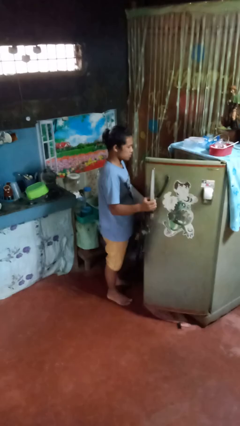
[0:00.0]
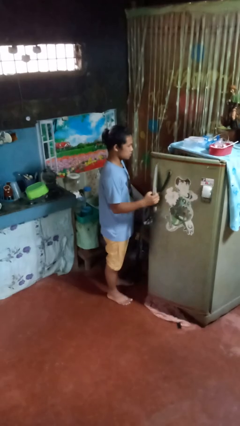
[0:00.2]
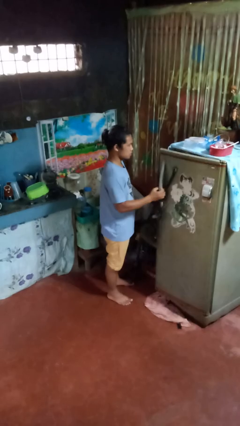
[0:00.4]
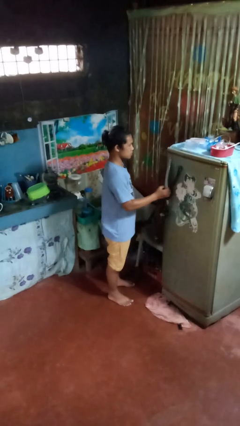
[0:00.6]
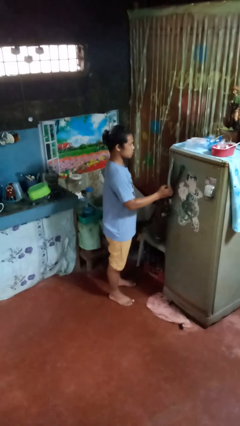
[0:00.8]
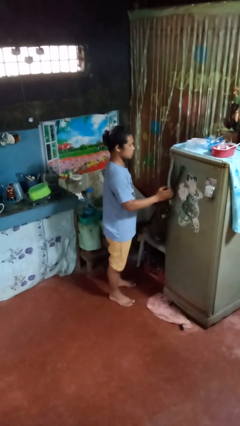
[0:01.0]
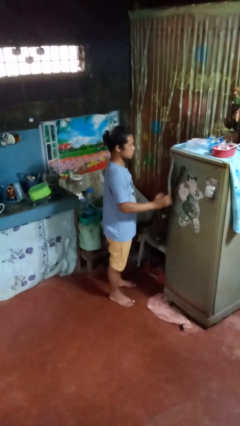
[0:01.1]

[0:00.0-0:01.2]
person closes refrigerator

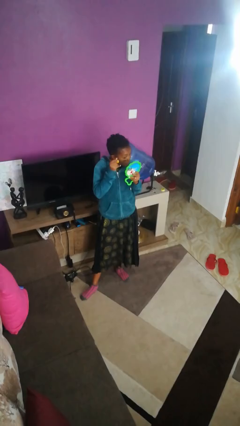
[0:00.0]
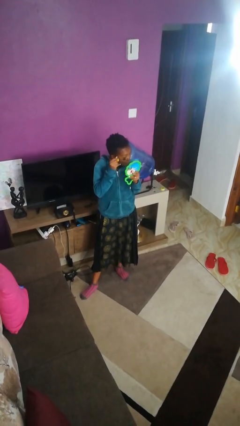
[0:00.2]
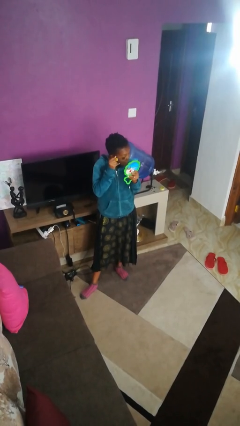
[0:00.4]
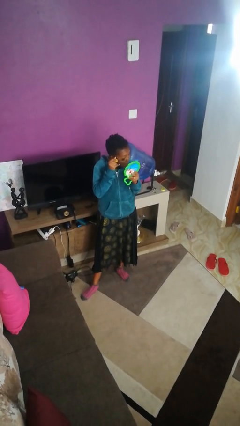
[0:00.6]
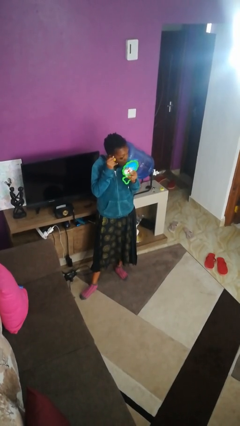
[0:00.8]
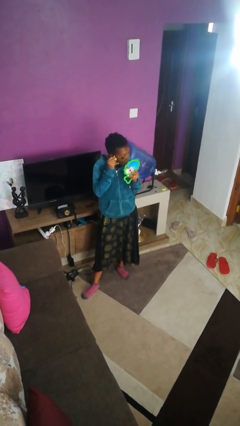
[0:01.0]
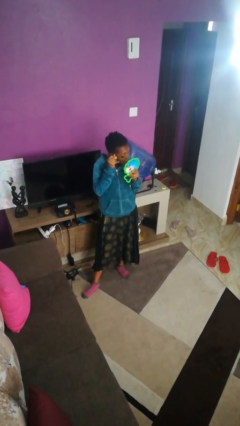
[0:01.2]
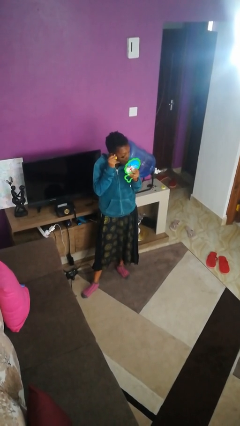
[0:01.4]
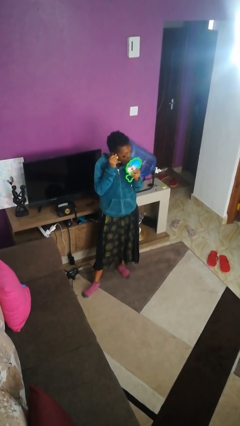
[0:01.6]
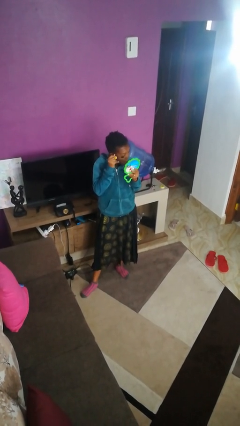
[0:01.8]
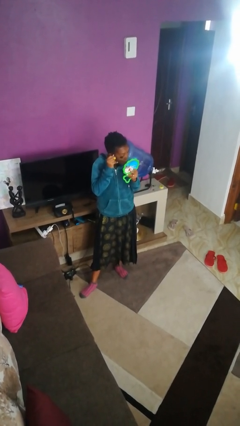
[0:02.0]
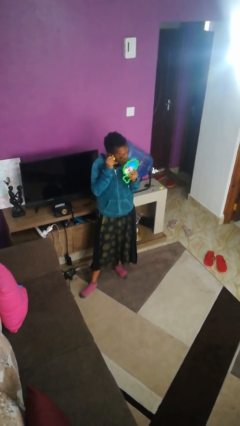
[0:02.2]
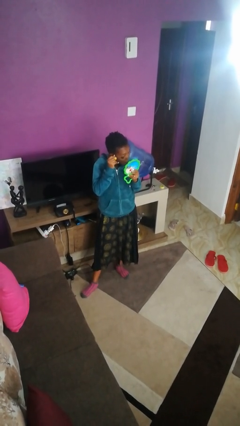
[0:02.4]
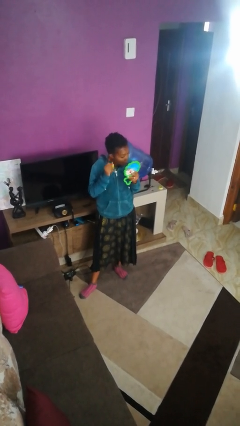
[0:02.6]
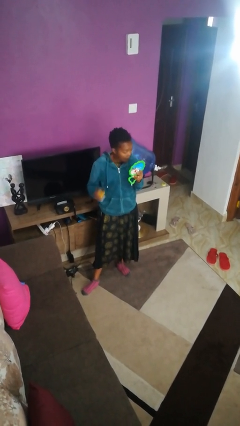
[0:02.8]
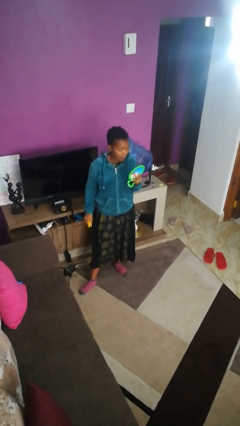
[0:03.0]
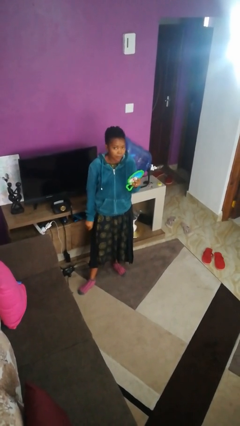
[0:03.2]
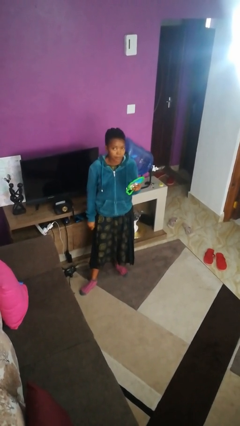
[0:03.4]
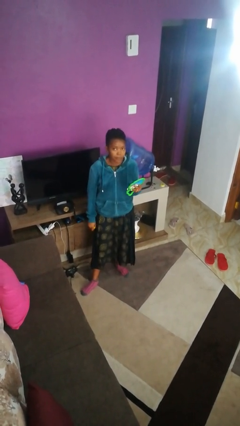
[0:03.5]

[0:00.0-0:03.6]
person applies eye makeup

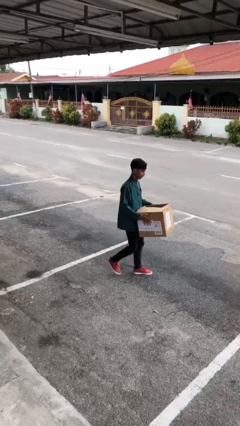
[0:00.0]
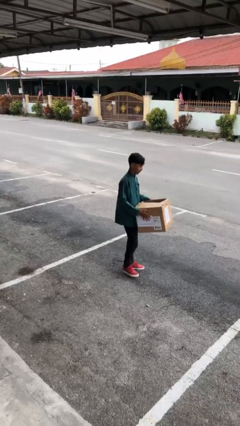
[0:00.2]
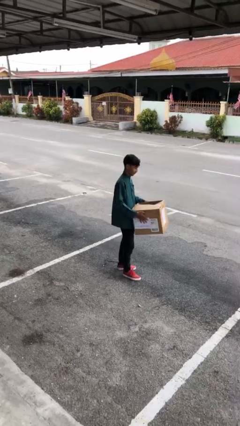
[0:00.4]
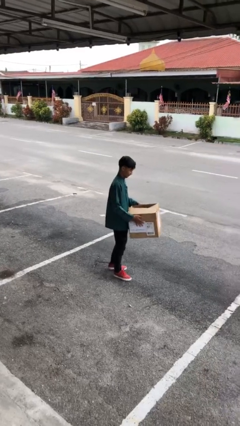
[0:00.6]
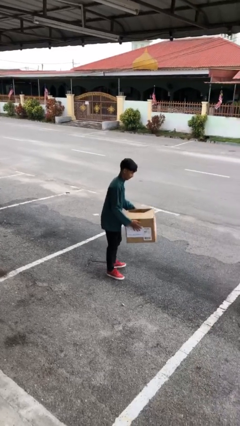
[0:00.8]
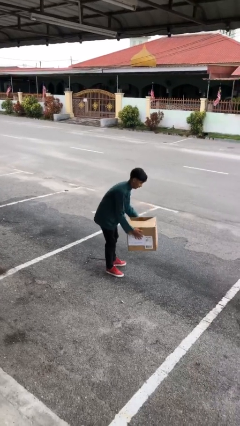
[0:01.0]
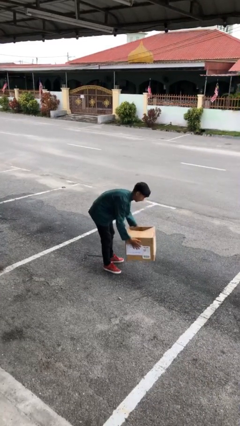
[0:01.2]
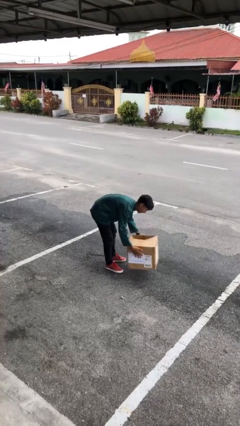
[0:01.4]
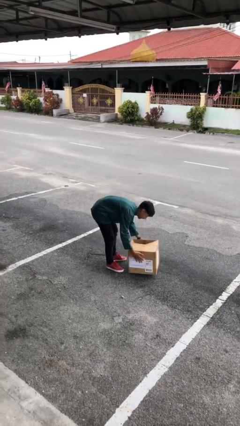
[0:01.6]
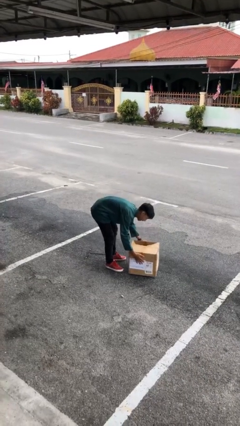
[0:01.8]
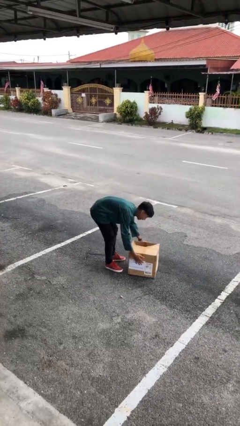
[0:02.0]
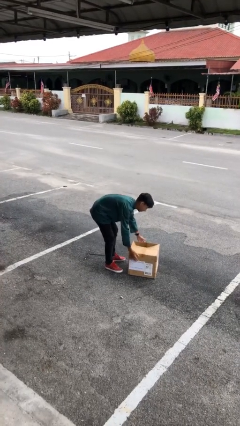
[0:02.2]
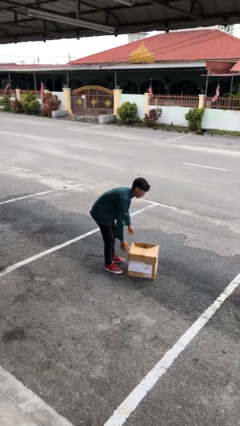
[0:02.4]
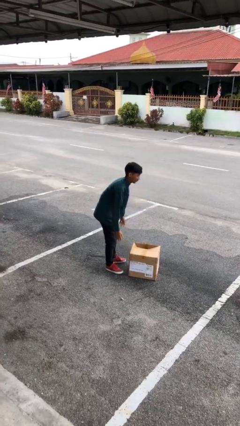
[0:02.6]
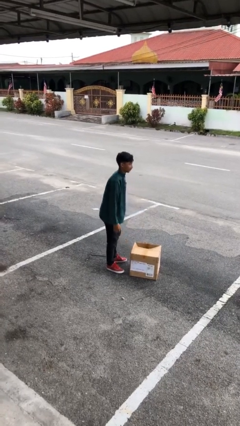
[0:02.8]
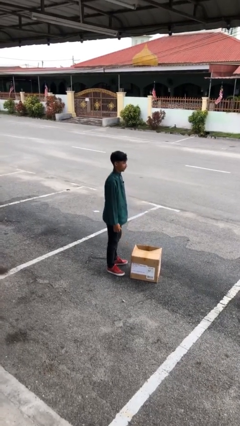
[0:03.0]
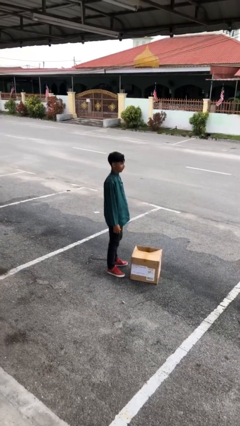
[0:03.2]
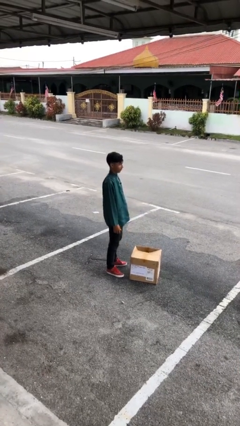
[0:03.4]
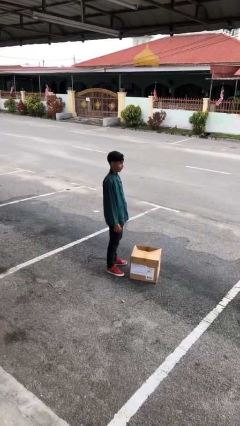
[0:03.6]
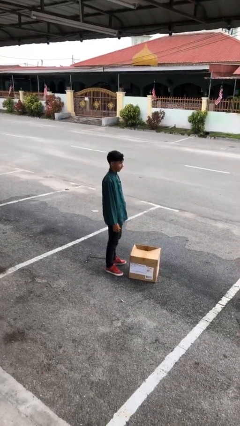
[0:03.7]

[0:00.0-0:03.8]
person puts down object on floor

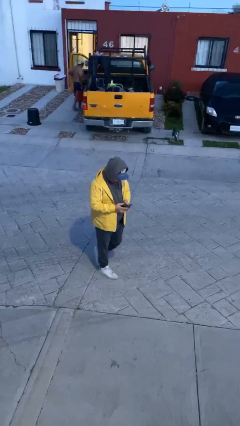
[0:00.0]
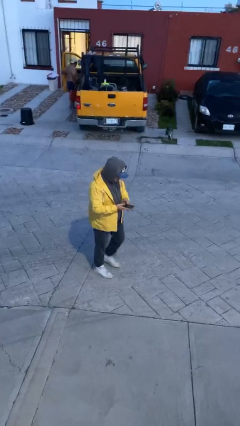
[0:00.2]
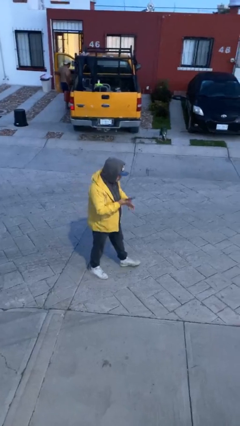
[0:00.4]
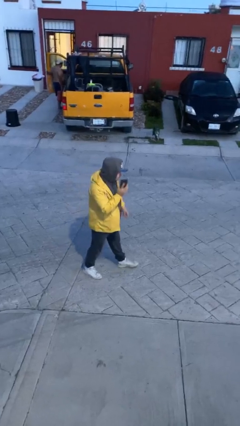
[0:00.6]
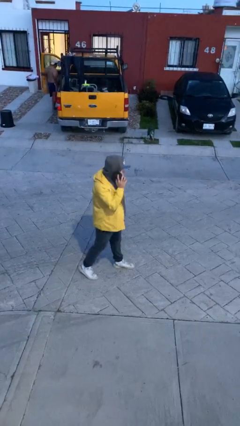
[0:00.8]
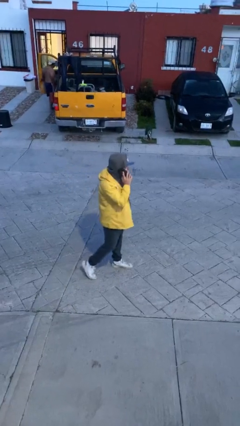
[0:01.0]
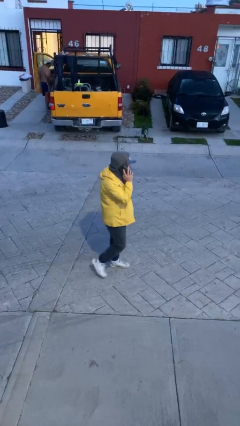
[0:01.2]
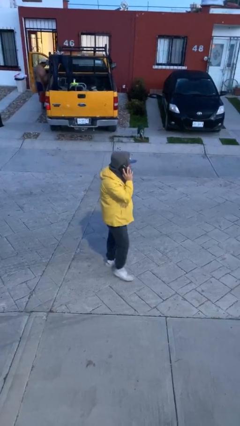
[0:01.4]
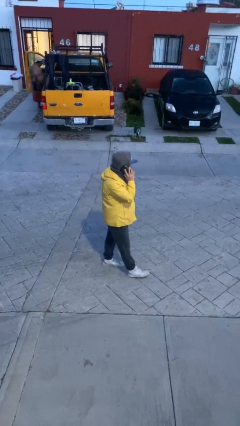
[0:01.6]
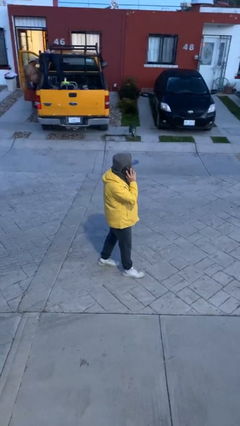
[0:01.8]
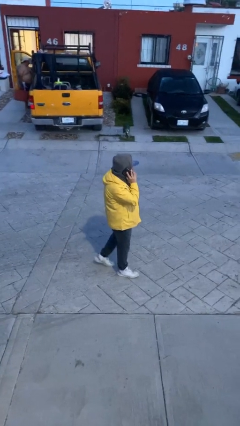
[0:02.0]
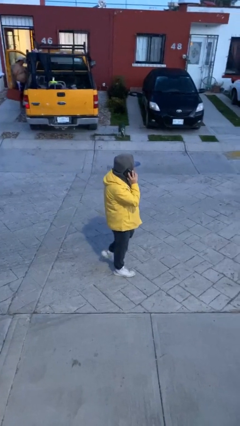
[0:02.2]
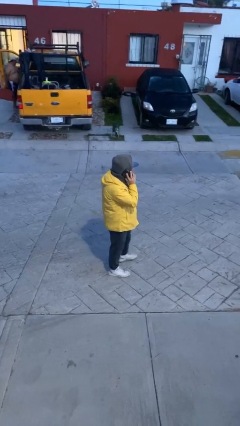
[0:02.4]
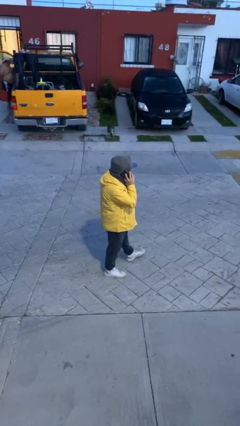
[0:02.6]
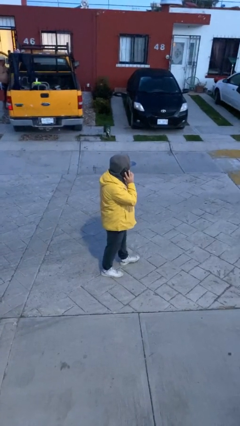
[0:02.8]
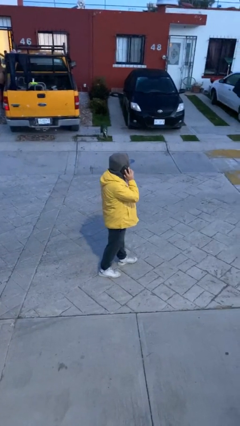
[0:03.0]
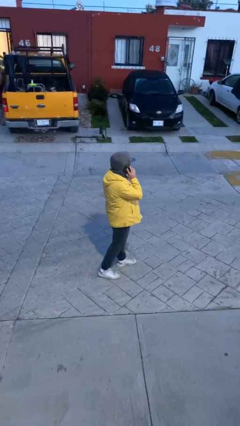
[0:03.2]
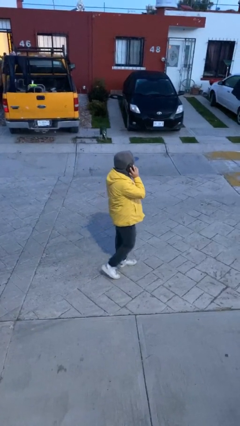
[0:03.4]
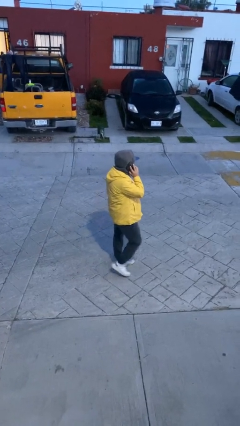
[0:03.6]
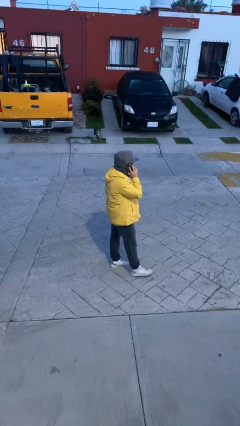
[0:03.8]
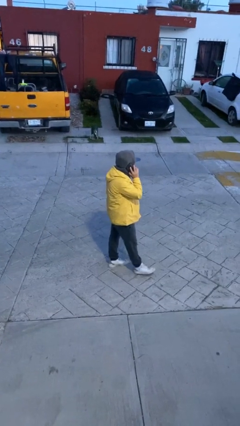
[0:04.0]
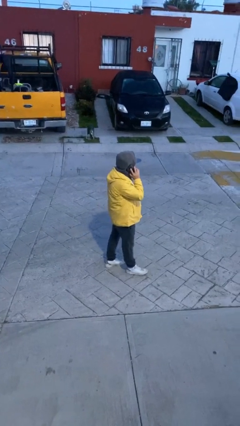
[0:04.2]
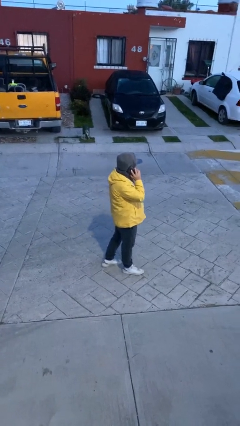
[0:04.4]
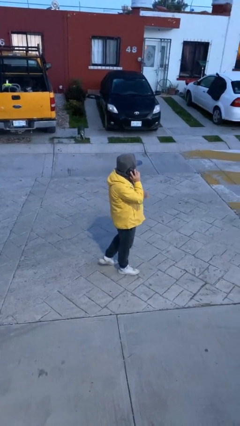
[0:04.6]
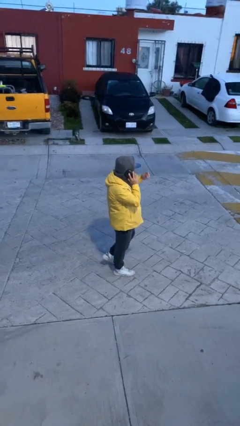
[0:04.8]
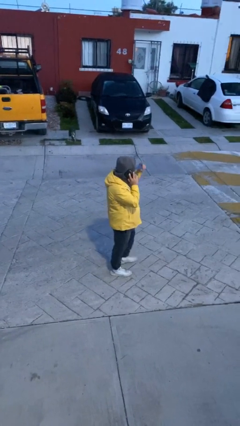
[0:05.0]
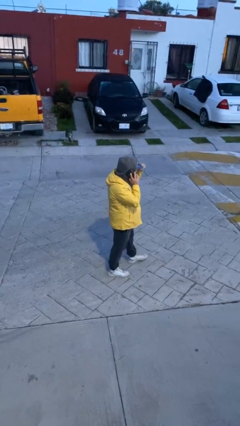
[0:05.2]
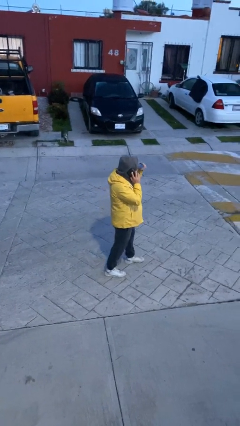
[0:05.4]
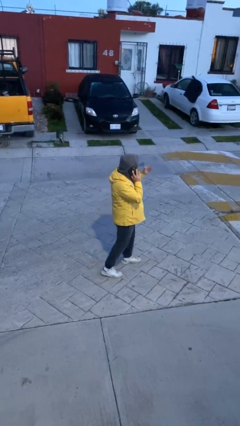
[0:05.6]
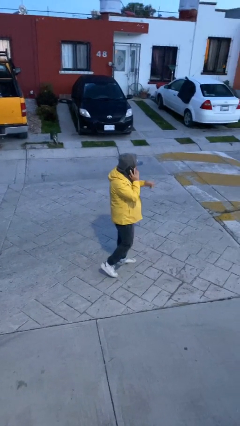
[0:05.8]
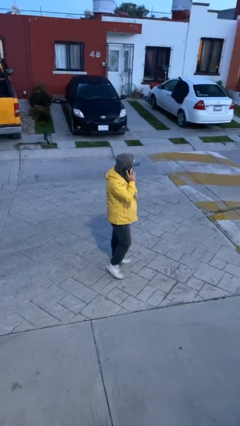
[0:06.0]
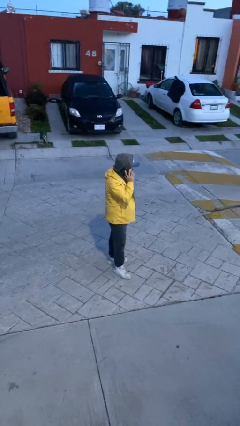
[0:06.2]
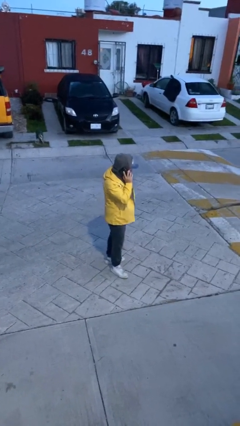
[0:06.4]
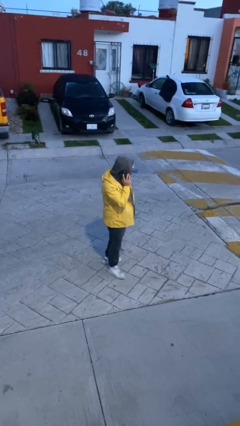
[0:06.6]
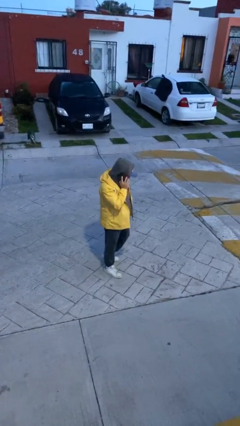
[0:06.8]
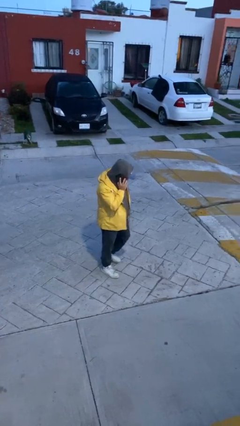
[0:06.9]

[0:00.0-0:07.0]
person talks on phone

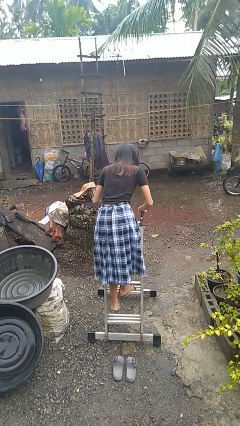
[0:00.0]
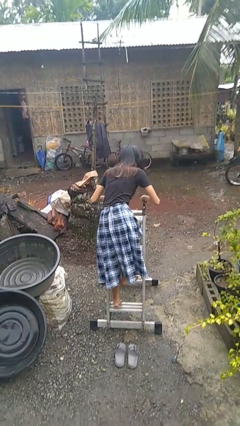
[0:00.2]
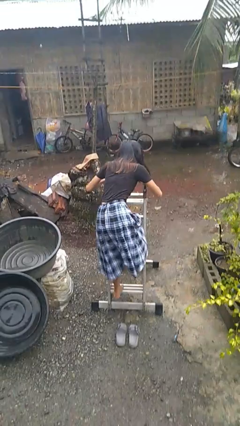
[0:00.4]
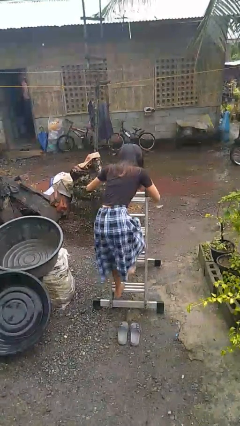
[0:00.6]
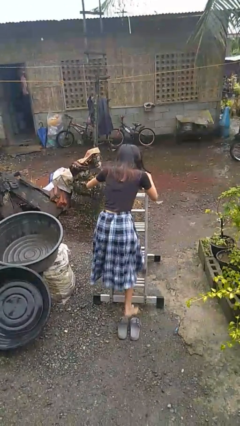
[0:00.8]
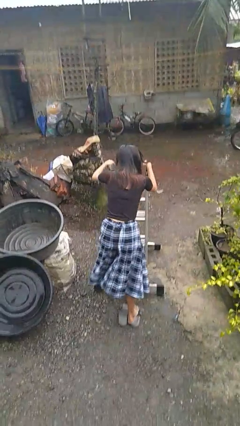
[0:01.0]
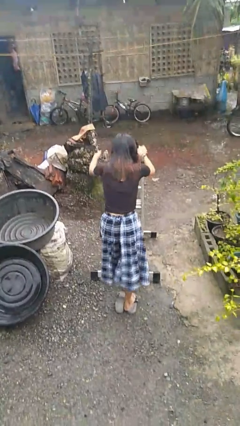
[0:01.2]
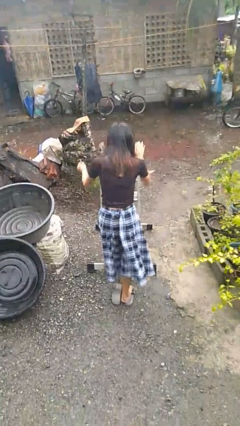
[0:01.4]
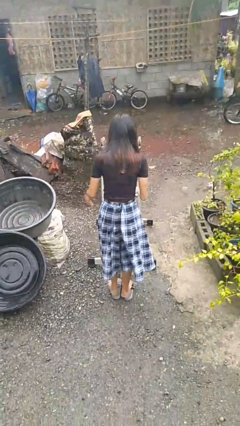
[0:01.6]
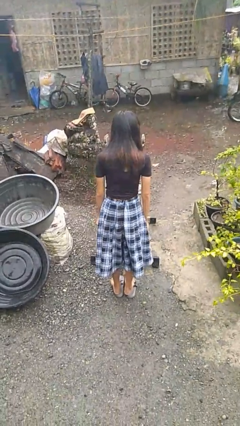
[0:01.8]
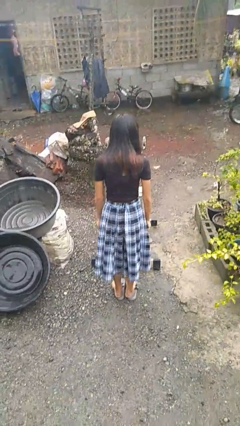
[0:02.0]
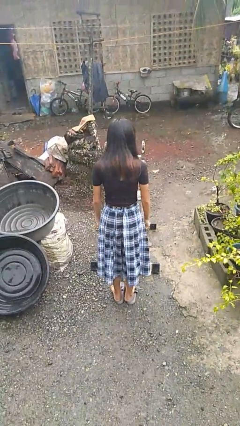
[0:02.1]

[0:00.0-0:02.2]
person climbs down ladder
